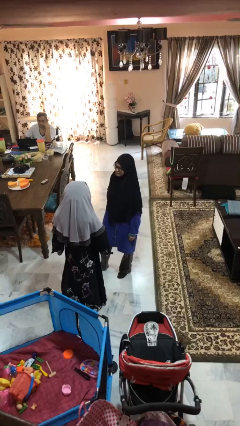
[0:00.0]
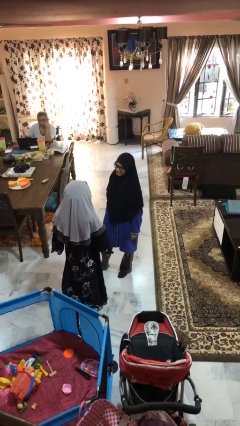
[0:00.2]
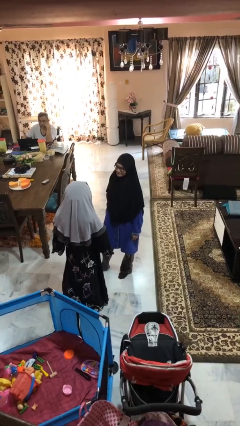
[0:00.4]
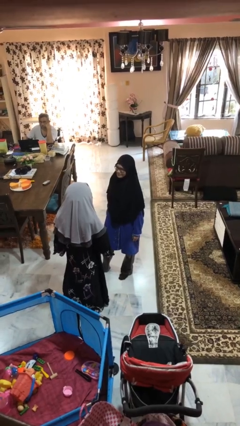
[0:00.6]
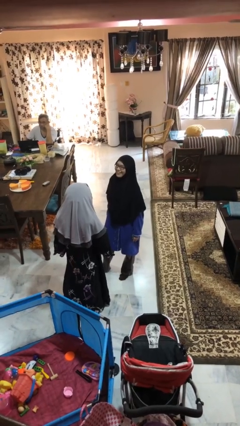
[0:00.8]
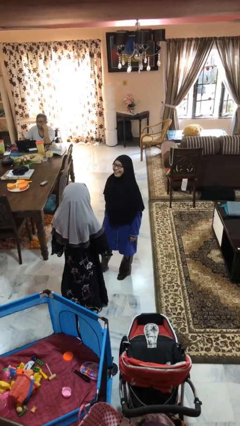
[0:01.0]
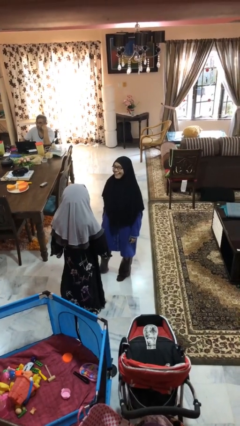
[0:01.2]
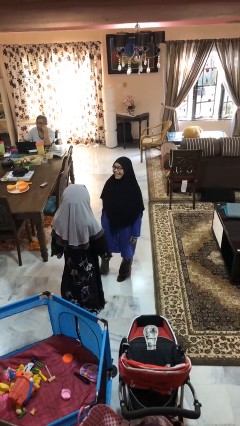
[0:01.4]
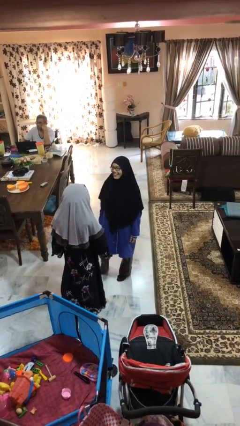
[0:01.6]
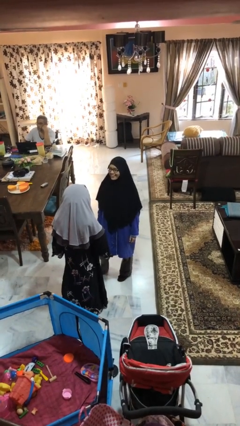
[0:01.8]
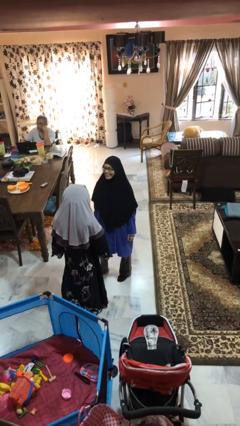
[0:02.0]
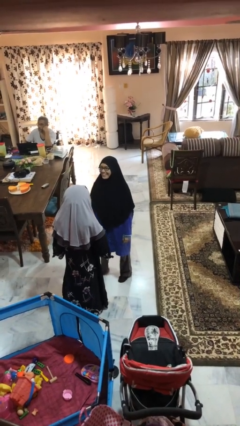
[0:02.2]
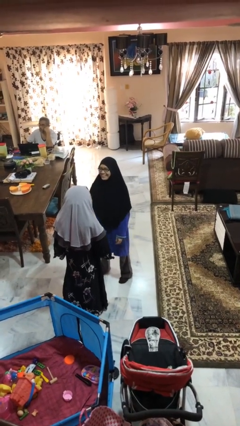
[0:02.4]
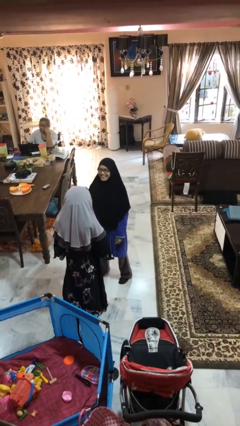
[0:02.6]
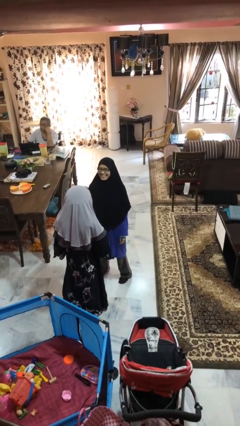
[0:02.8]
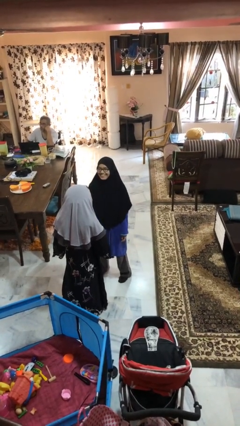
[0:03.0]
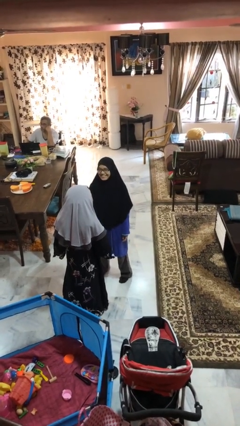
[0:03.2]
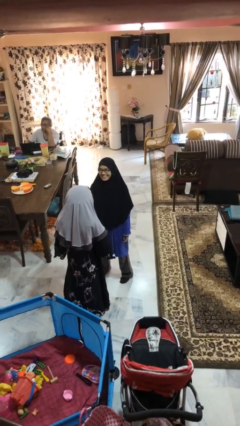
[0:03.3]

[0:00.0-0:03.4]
person laughs with person

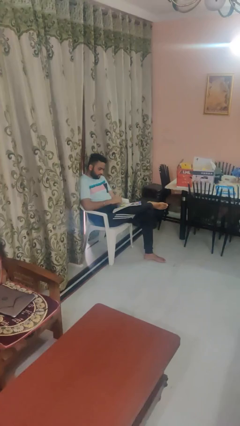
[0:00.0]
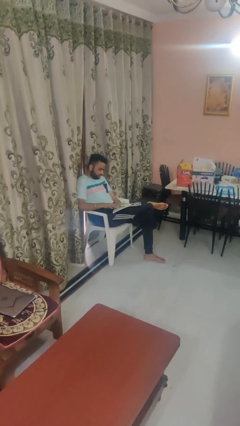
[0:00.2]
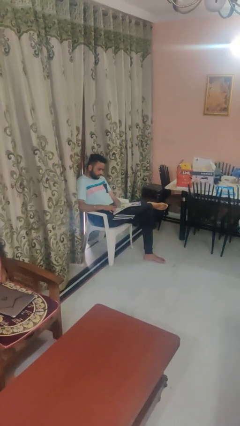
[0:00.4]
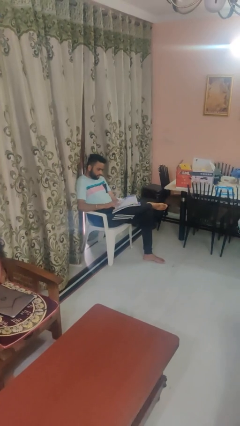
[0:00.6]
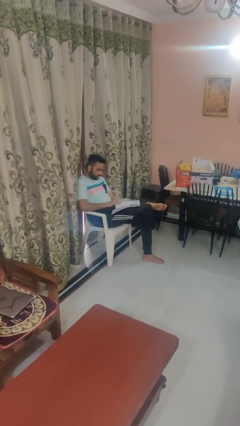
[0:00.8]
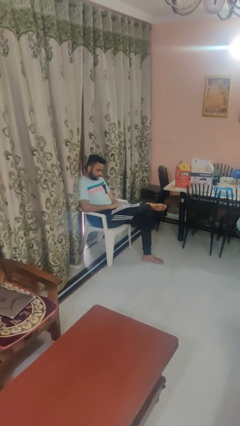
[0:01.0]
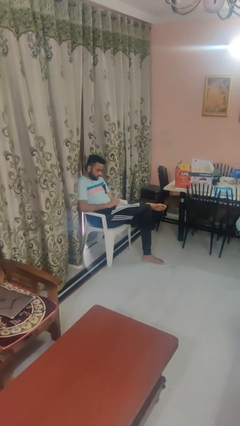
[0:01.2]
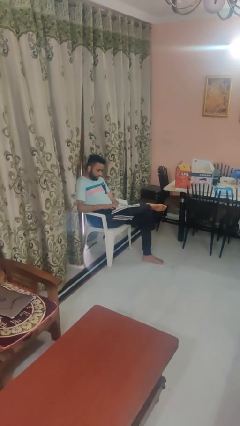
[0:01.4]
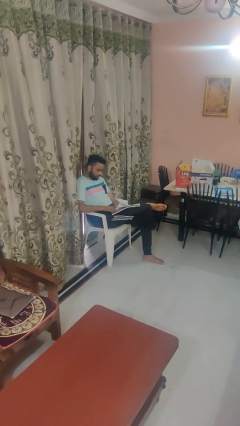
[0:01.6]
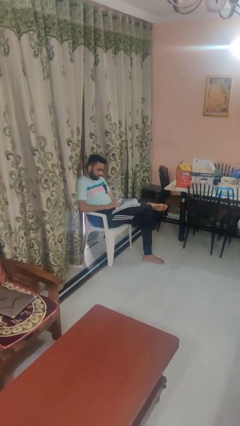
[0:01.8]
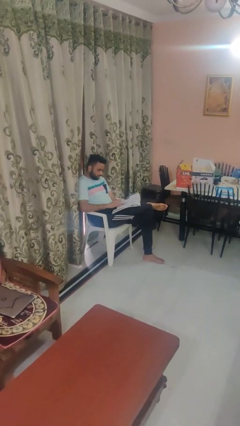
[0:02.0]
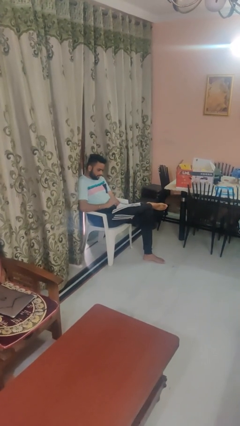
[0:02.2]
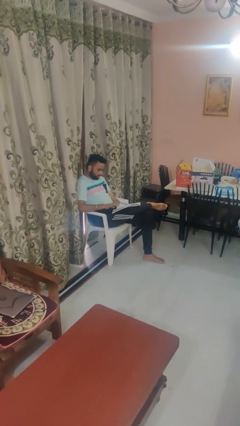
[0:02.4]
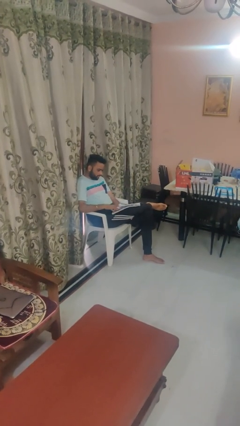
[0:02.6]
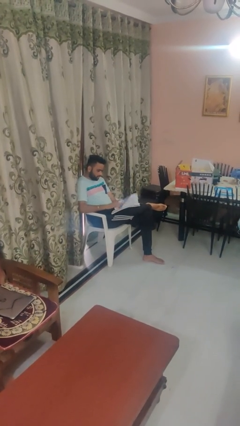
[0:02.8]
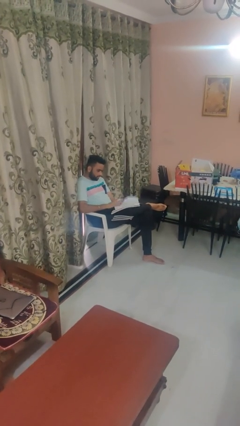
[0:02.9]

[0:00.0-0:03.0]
person reads magazine

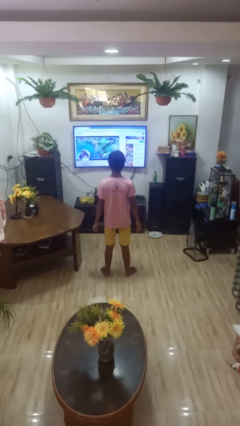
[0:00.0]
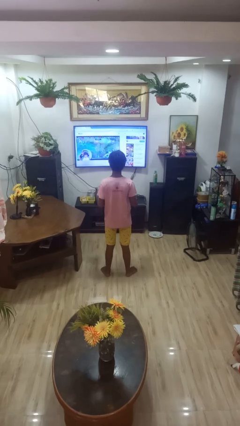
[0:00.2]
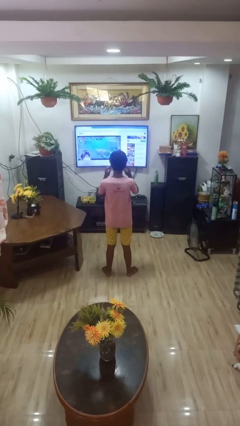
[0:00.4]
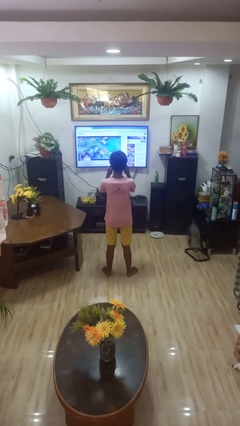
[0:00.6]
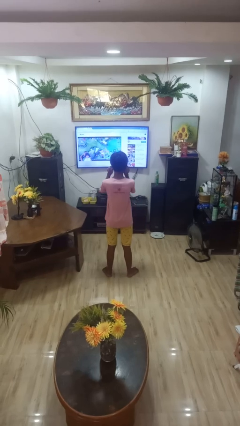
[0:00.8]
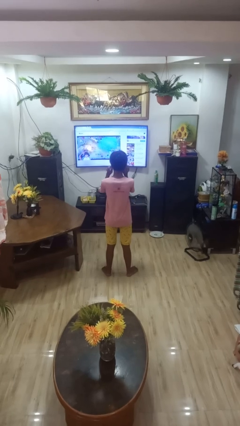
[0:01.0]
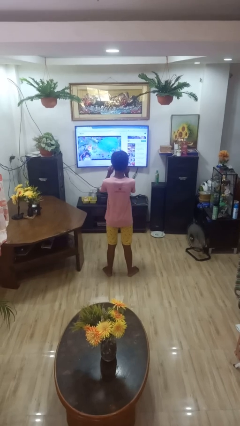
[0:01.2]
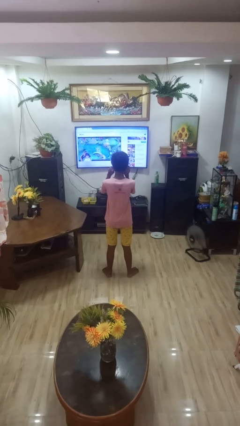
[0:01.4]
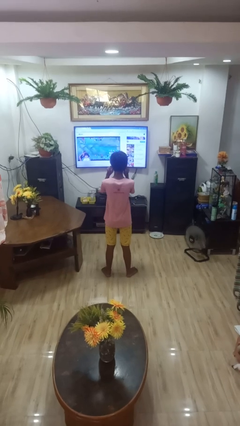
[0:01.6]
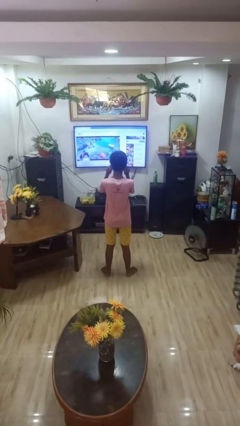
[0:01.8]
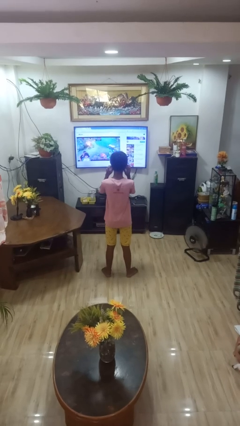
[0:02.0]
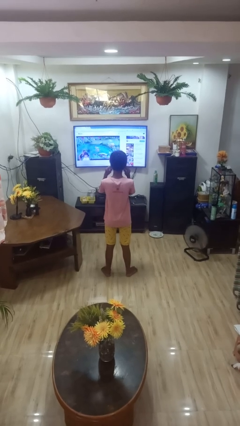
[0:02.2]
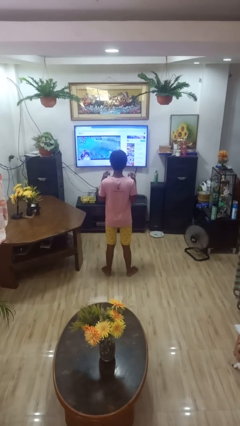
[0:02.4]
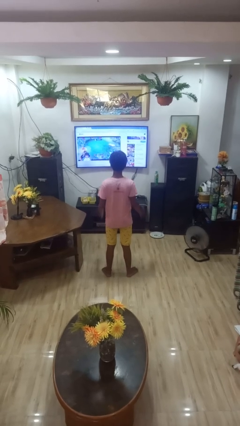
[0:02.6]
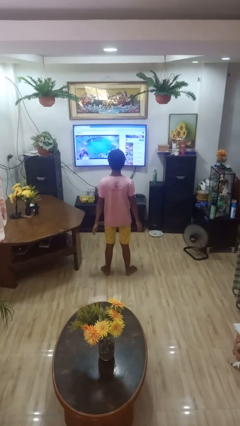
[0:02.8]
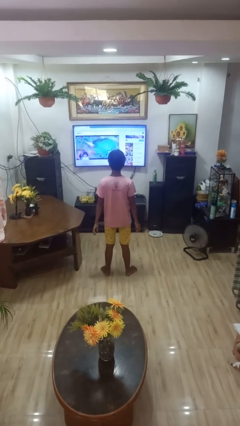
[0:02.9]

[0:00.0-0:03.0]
person touches earlobe

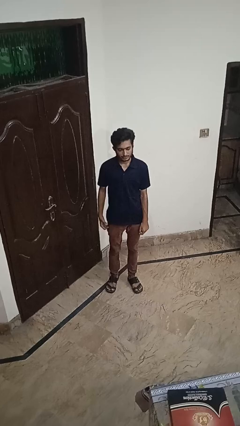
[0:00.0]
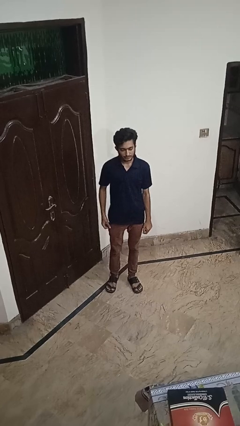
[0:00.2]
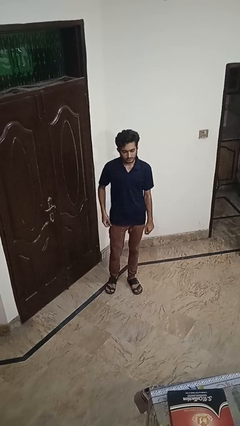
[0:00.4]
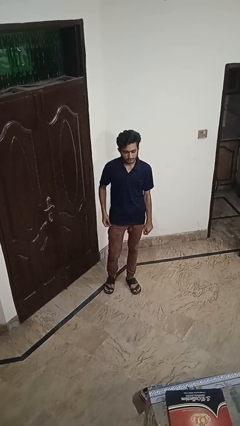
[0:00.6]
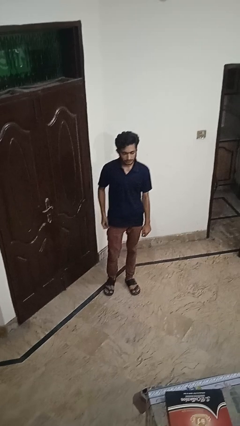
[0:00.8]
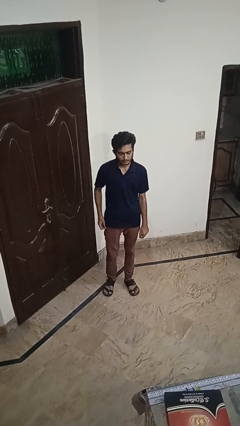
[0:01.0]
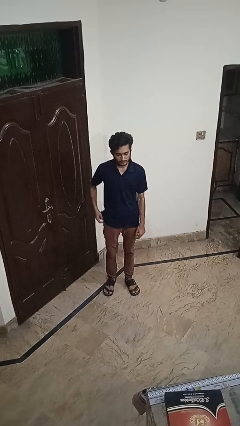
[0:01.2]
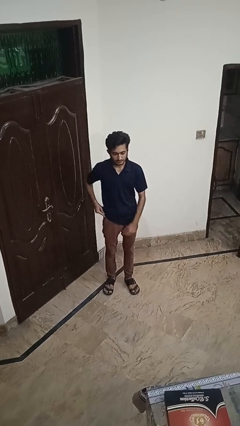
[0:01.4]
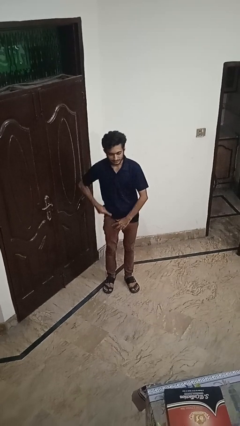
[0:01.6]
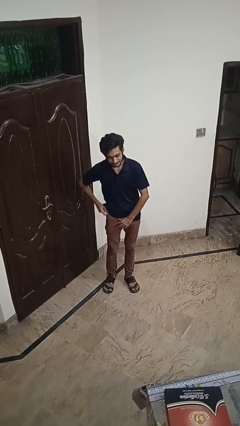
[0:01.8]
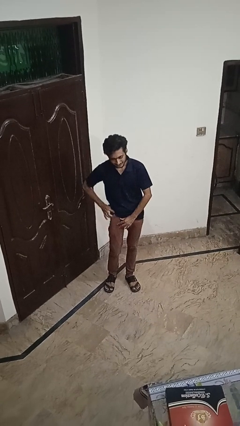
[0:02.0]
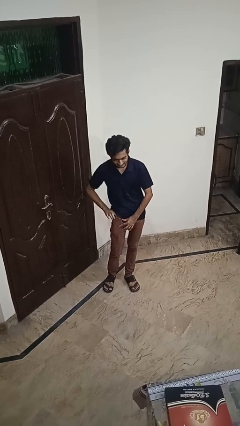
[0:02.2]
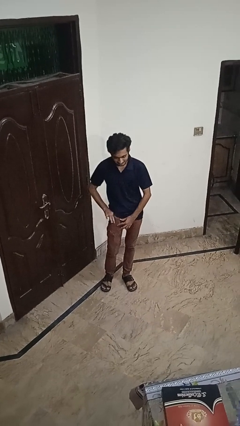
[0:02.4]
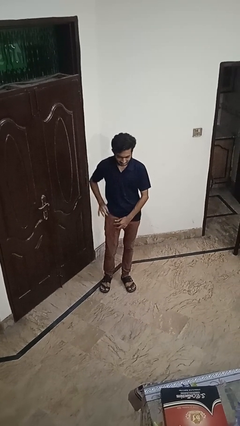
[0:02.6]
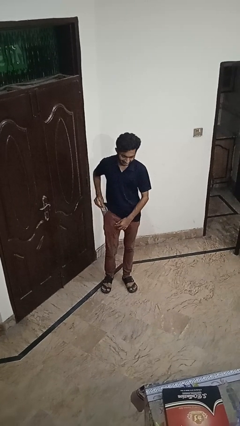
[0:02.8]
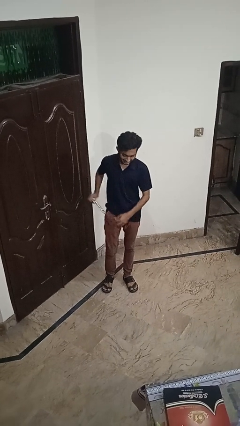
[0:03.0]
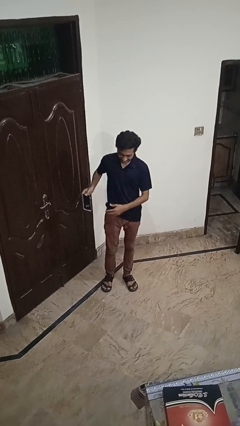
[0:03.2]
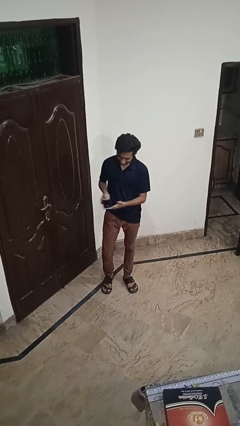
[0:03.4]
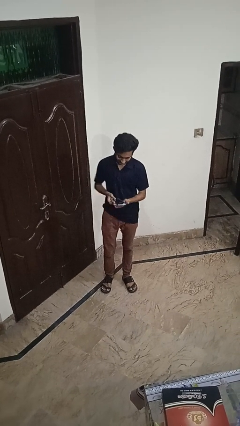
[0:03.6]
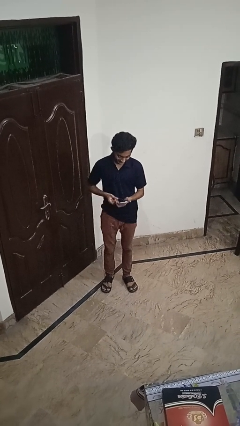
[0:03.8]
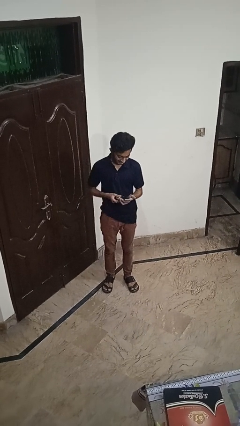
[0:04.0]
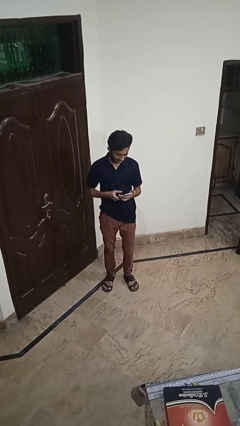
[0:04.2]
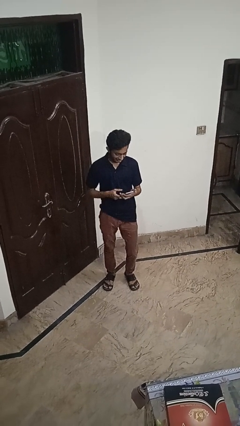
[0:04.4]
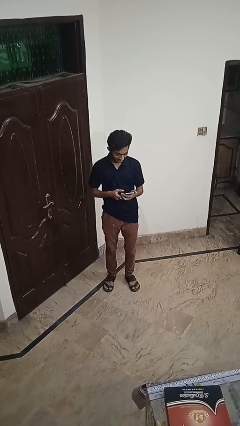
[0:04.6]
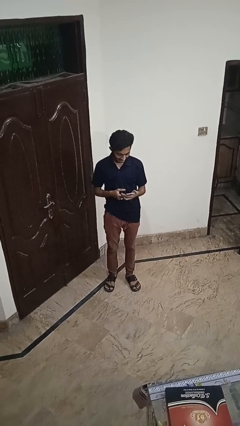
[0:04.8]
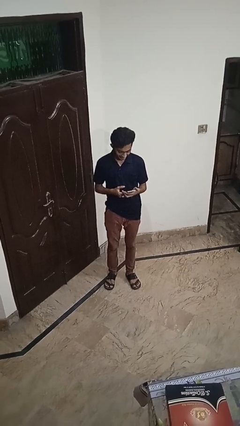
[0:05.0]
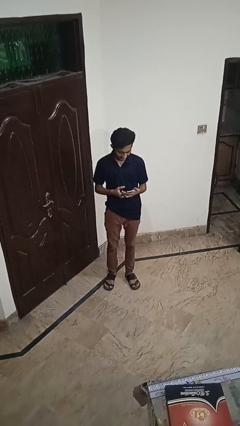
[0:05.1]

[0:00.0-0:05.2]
person takes phone from pocket

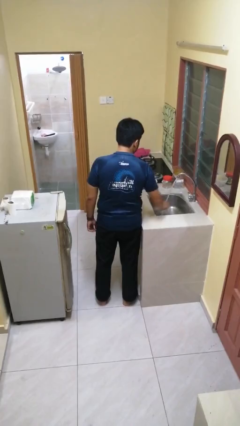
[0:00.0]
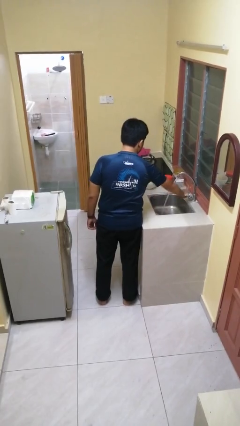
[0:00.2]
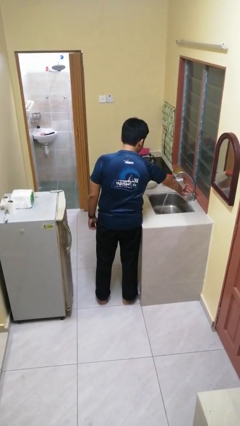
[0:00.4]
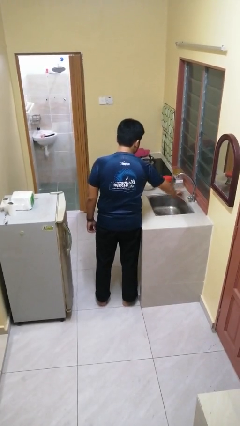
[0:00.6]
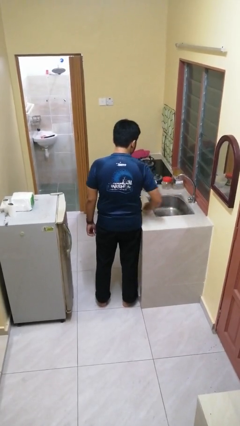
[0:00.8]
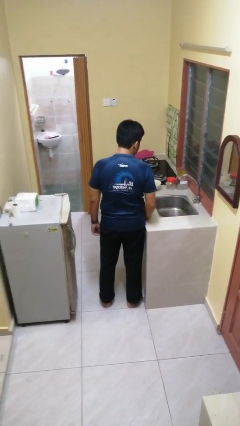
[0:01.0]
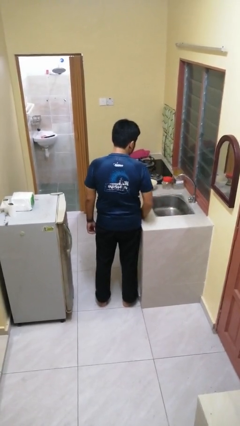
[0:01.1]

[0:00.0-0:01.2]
person turns off faucet

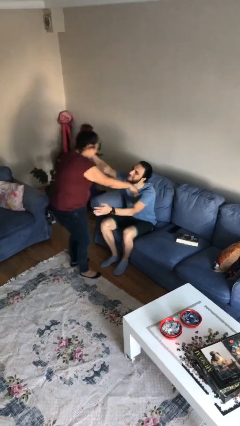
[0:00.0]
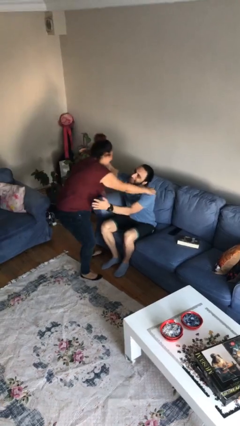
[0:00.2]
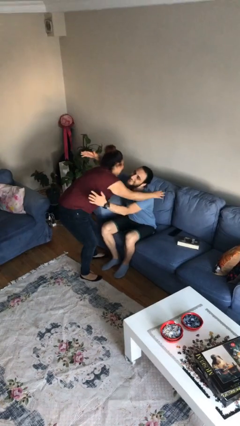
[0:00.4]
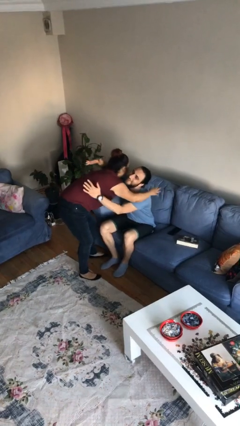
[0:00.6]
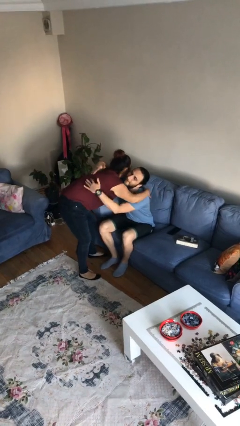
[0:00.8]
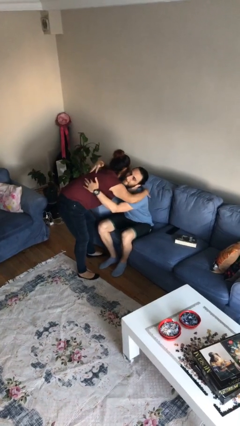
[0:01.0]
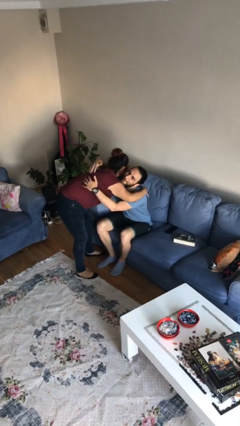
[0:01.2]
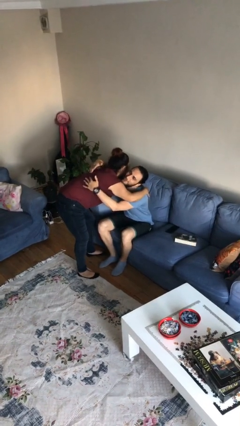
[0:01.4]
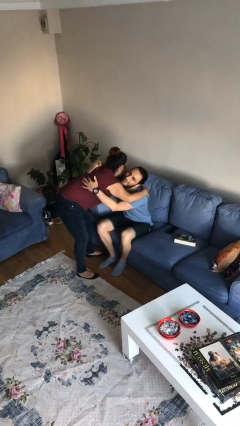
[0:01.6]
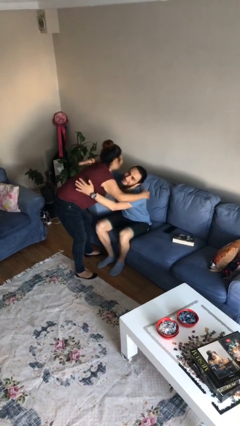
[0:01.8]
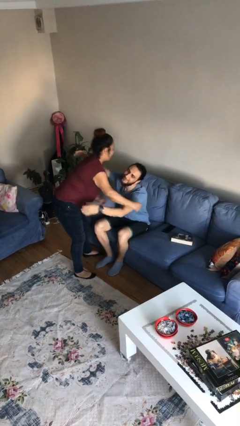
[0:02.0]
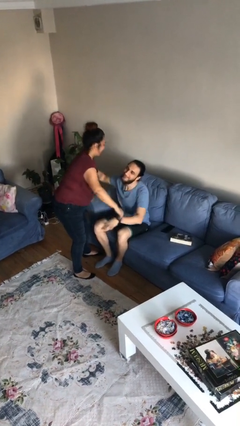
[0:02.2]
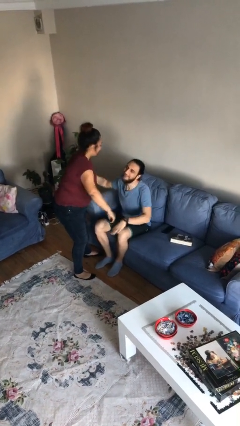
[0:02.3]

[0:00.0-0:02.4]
person embraces person
